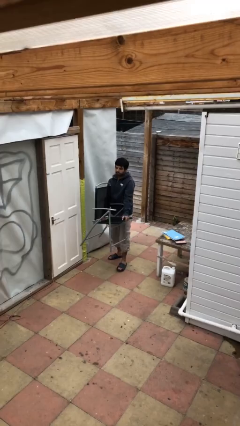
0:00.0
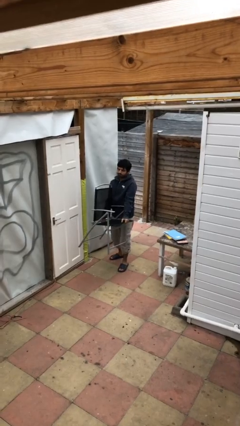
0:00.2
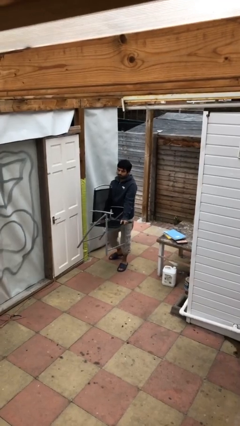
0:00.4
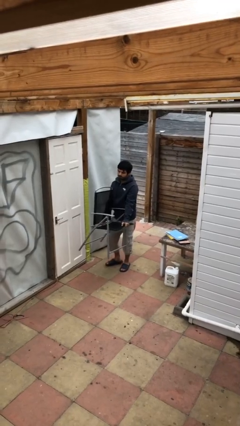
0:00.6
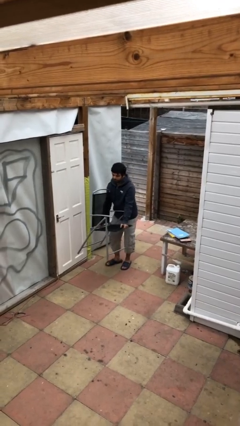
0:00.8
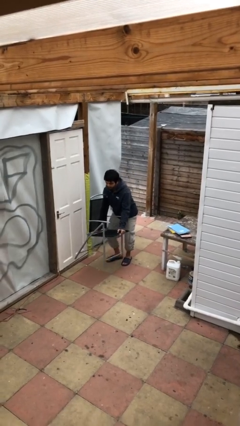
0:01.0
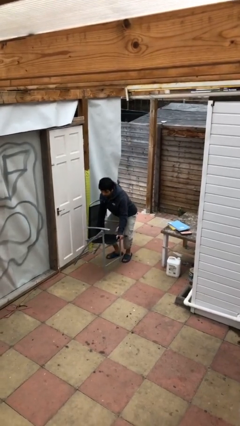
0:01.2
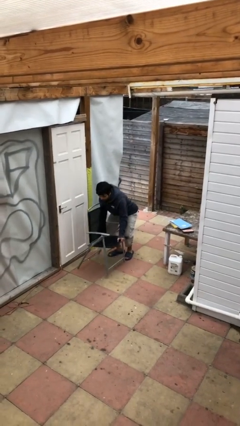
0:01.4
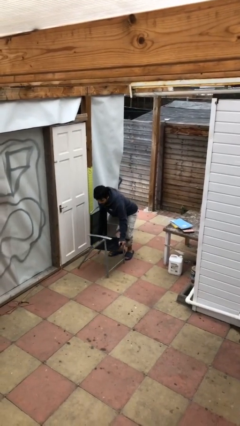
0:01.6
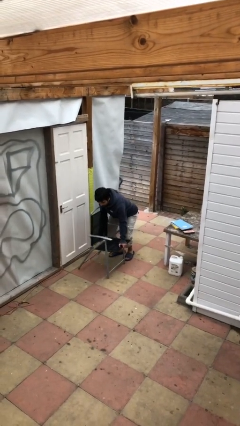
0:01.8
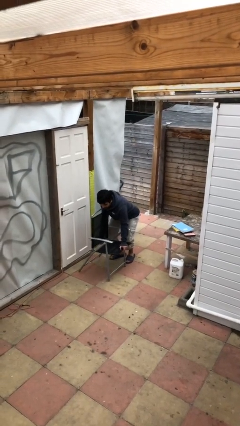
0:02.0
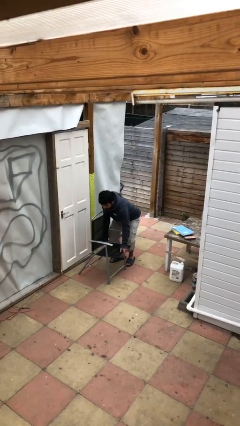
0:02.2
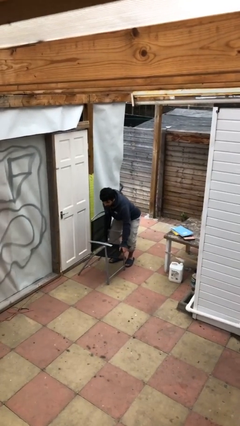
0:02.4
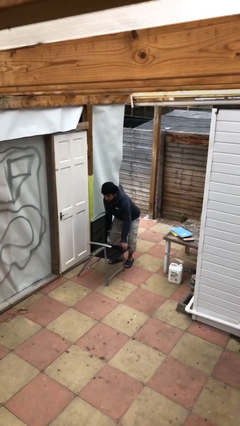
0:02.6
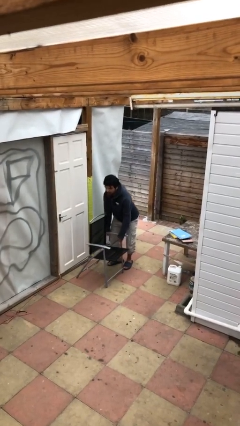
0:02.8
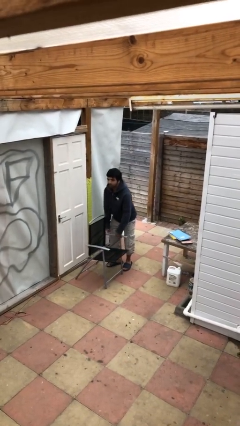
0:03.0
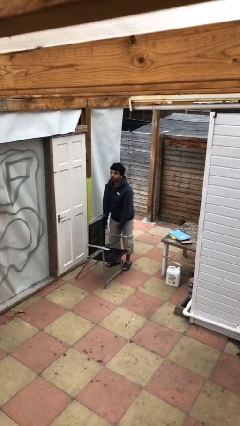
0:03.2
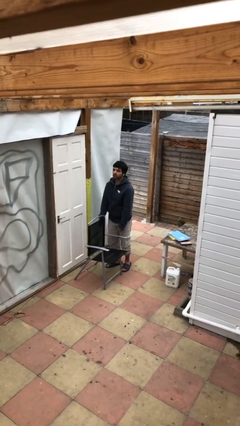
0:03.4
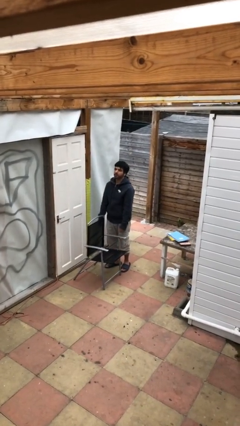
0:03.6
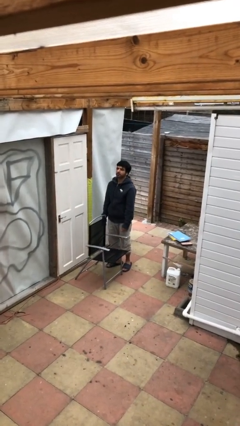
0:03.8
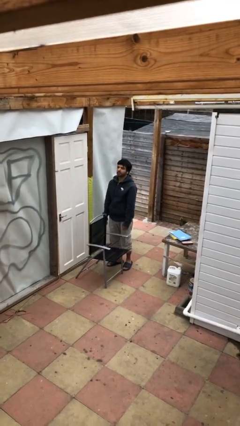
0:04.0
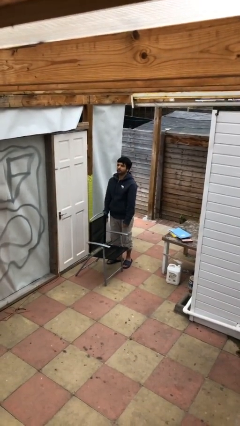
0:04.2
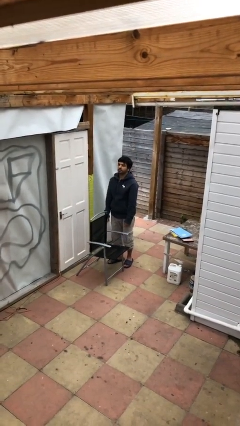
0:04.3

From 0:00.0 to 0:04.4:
person puts down object on floor

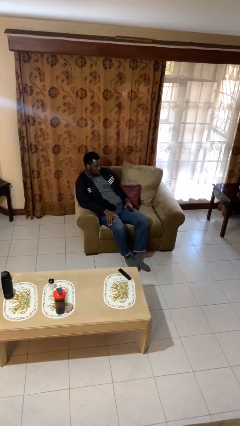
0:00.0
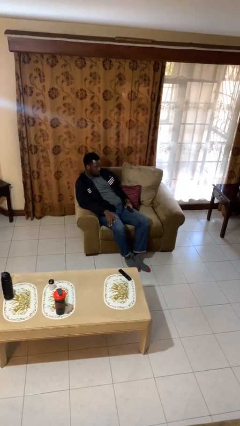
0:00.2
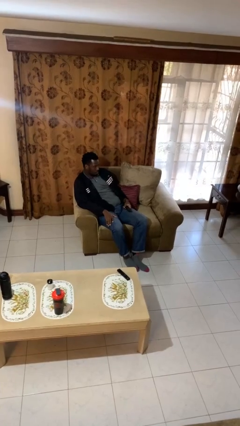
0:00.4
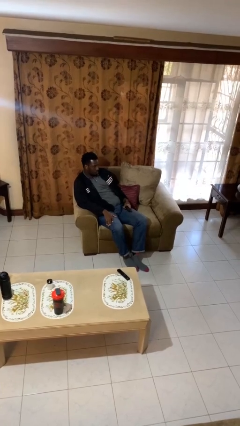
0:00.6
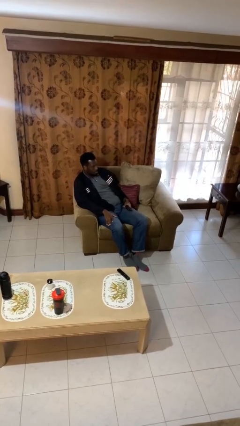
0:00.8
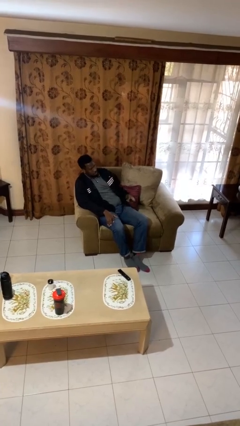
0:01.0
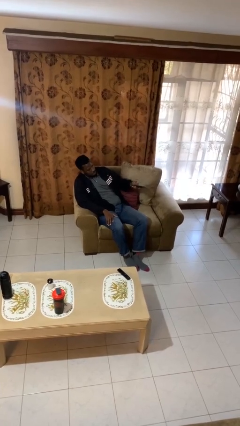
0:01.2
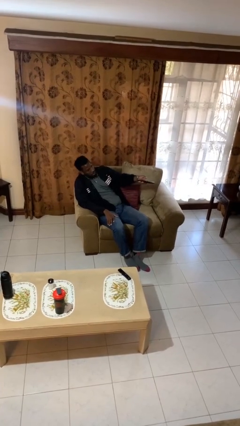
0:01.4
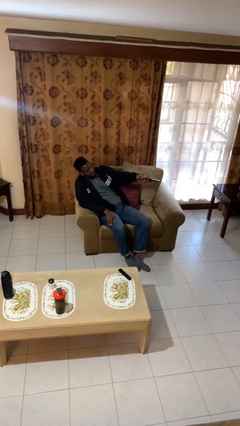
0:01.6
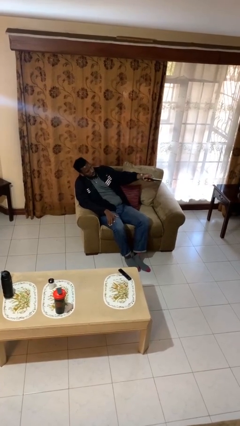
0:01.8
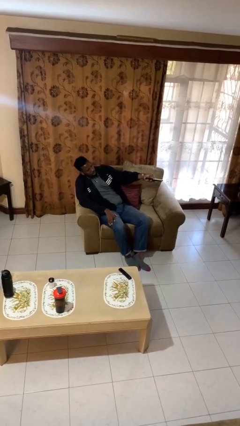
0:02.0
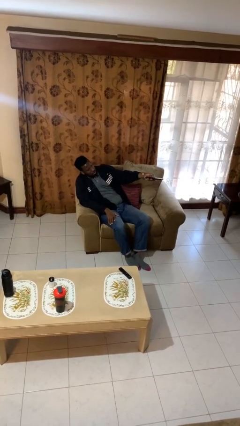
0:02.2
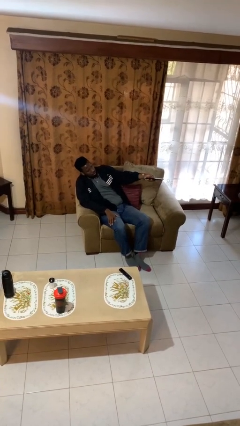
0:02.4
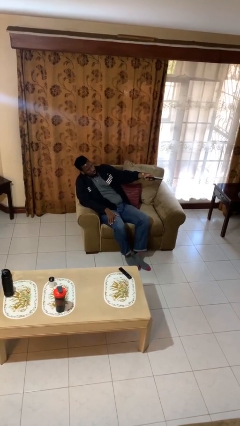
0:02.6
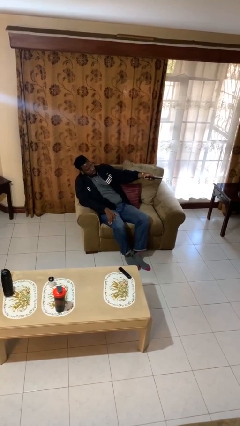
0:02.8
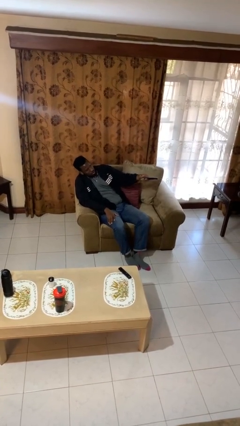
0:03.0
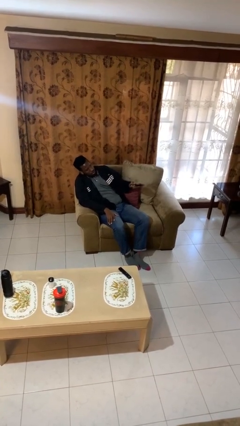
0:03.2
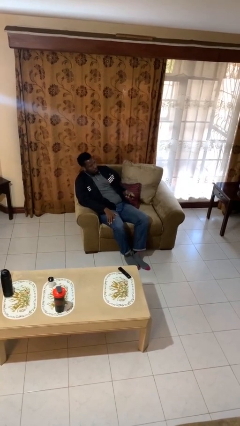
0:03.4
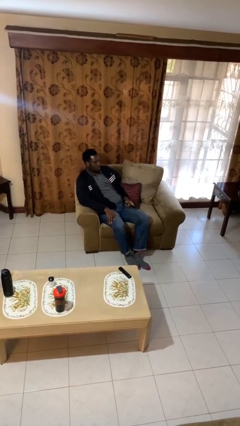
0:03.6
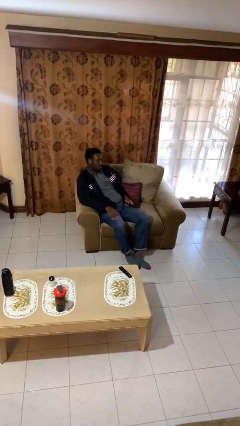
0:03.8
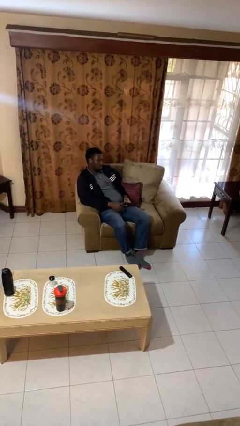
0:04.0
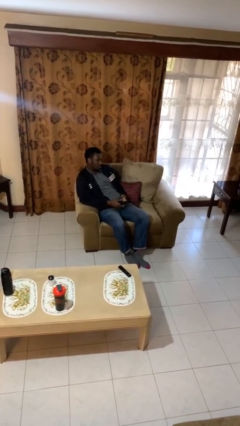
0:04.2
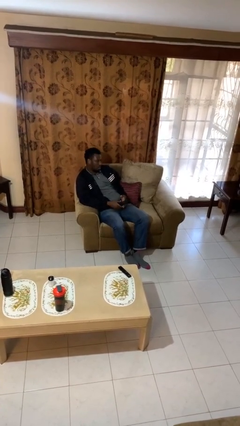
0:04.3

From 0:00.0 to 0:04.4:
person uses television remote

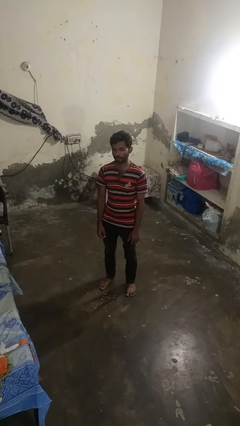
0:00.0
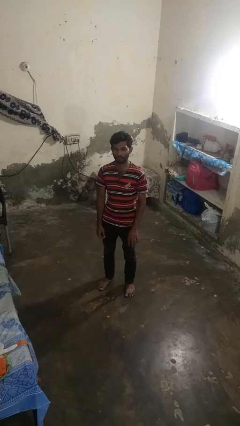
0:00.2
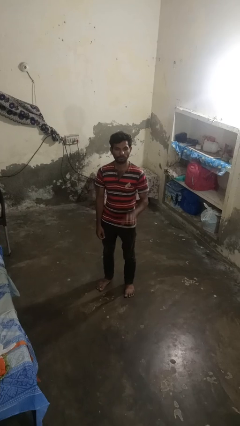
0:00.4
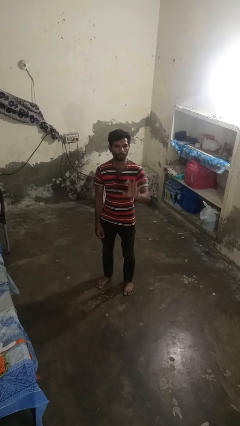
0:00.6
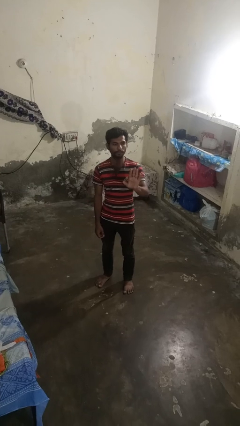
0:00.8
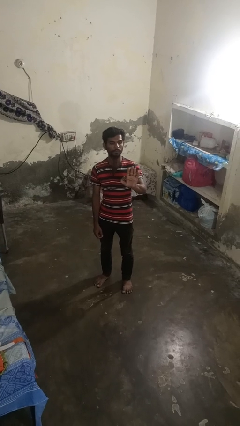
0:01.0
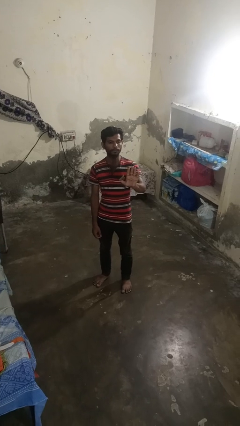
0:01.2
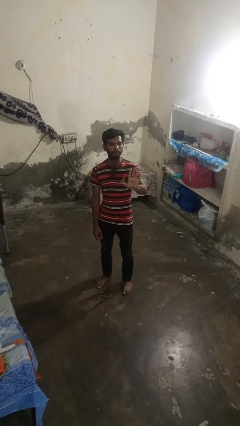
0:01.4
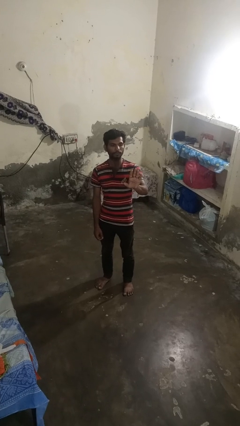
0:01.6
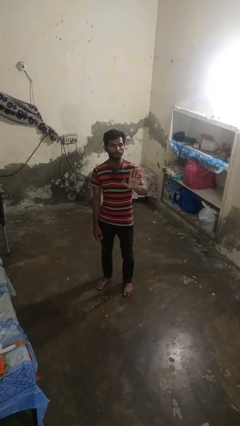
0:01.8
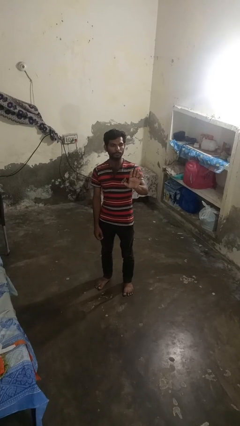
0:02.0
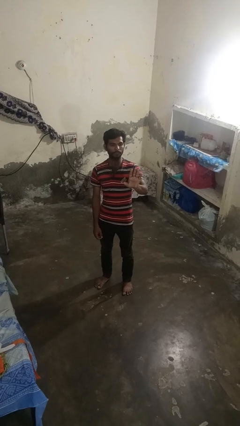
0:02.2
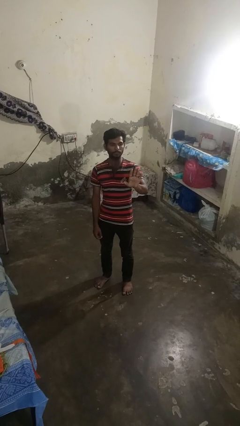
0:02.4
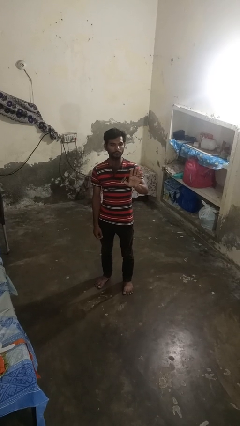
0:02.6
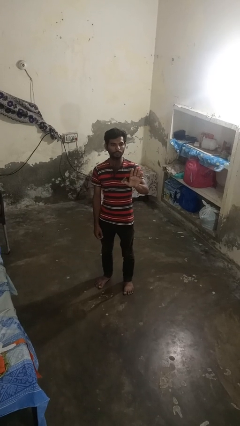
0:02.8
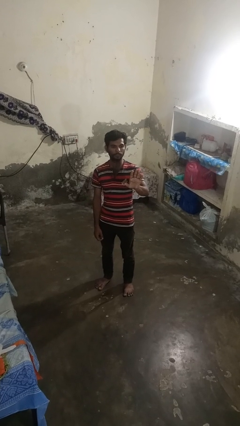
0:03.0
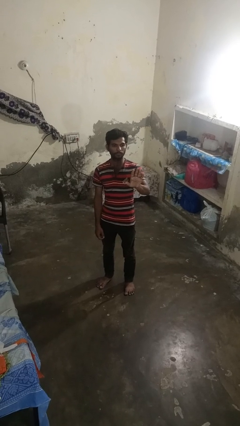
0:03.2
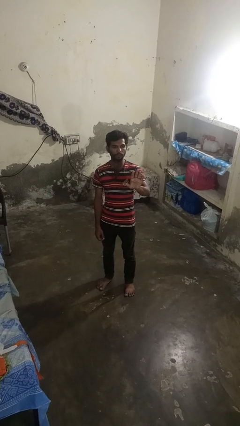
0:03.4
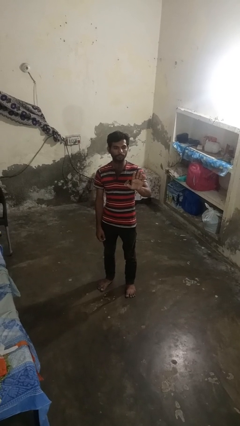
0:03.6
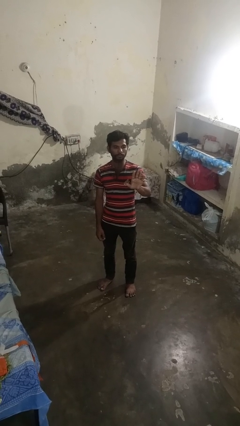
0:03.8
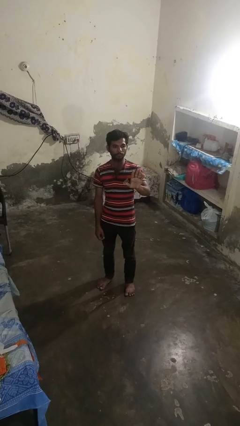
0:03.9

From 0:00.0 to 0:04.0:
person gestures stop

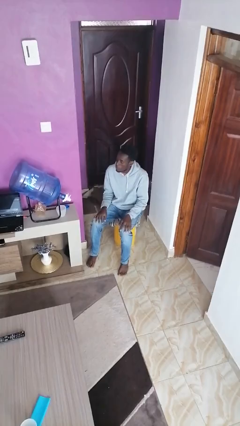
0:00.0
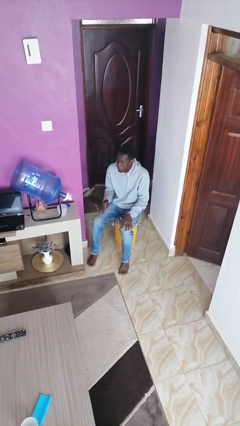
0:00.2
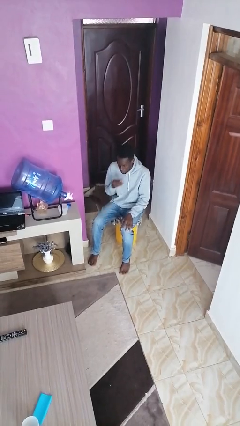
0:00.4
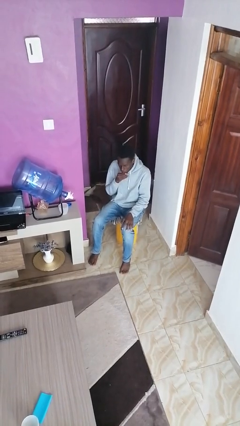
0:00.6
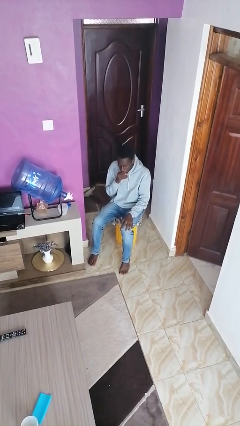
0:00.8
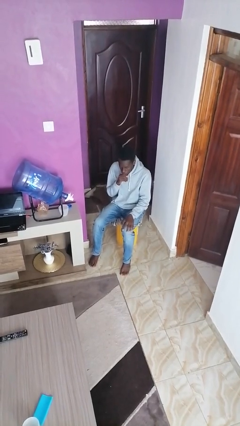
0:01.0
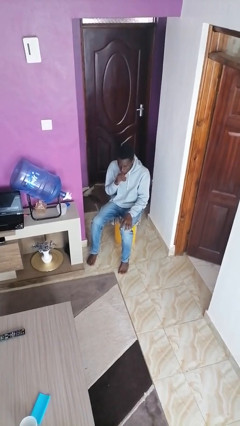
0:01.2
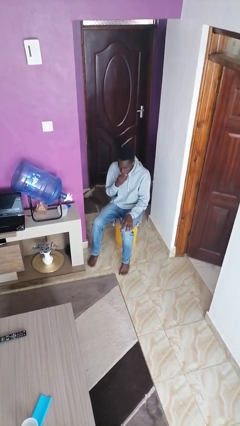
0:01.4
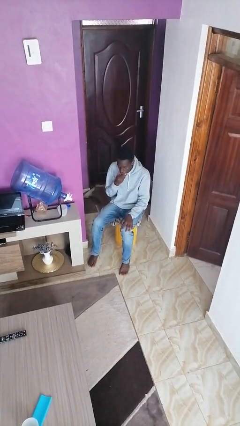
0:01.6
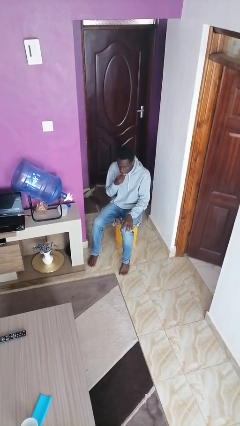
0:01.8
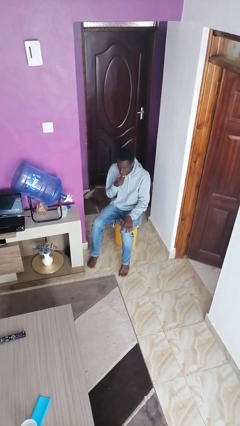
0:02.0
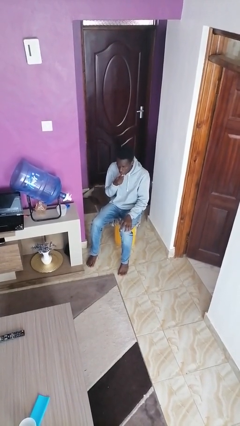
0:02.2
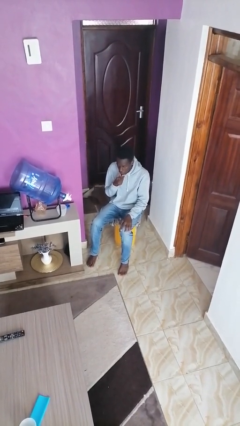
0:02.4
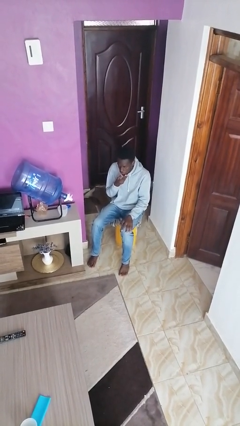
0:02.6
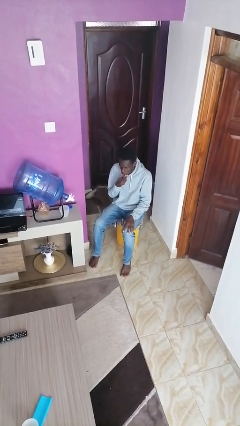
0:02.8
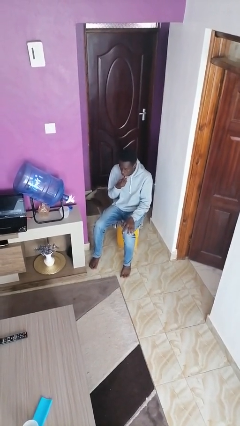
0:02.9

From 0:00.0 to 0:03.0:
person strokes chin

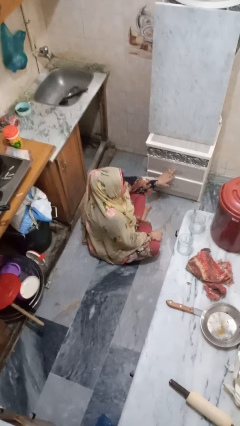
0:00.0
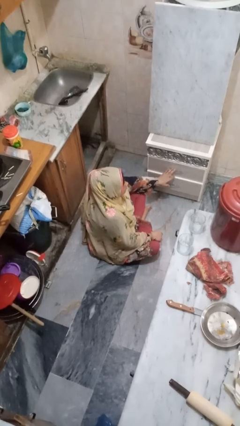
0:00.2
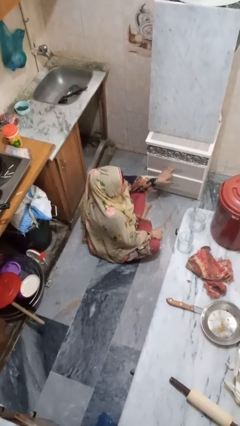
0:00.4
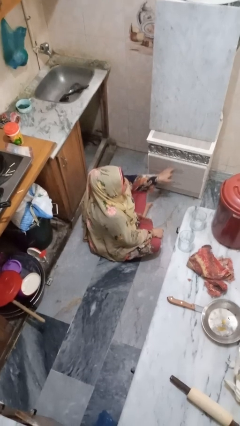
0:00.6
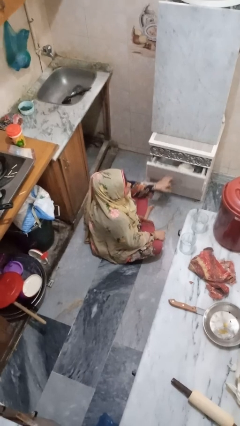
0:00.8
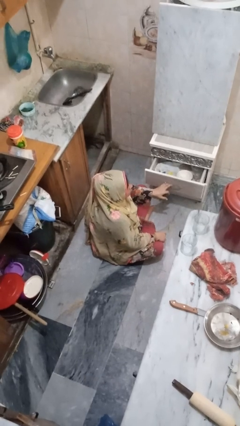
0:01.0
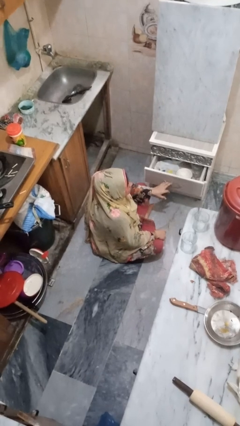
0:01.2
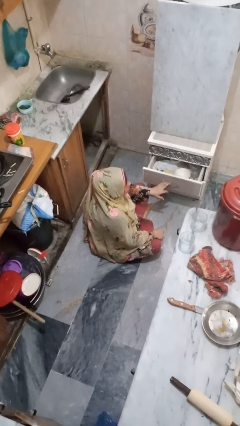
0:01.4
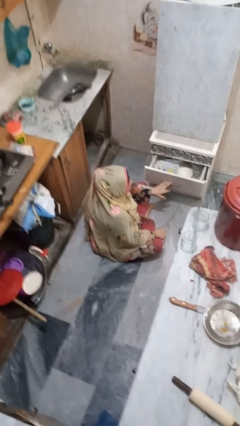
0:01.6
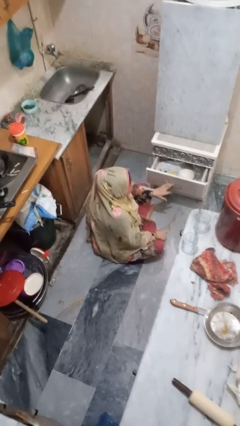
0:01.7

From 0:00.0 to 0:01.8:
person opens kitchen drawer

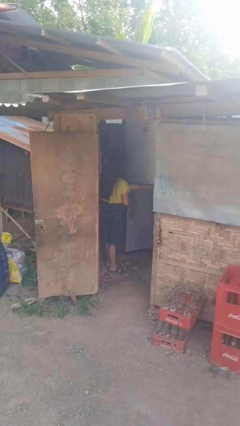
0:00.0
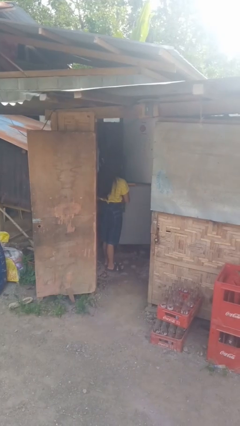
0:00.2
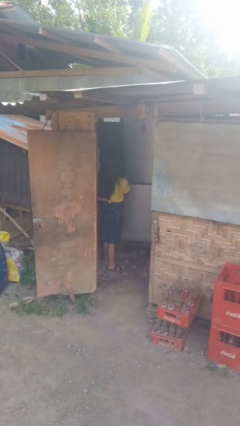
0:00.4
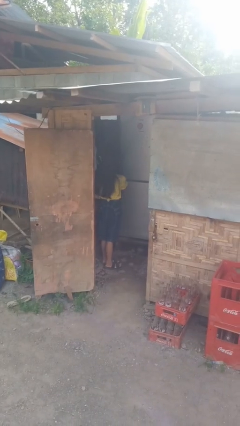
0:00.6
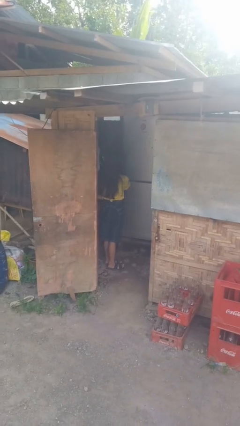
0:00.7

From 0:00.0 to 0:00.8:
person closes refrigerator
